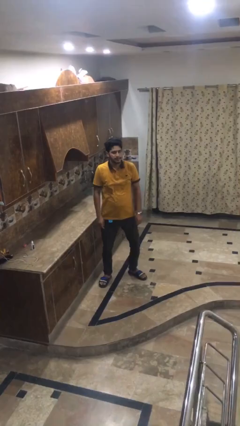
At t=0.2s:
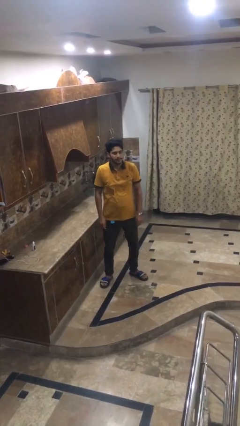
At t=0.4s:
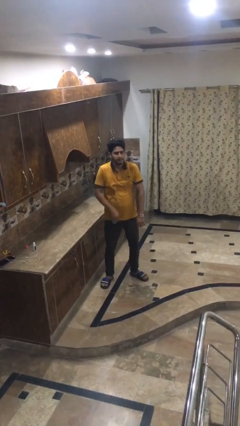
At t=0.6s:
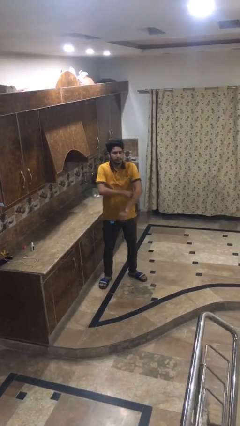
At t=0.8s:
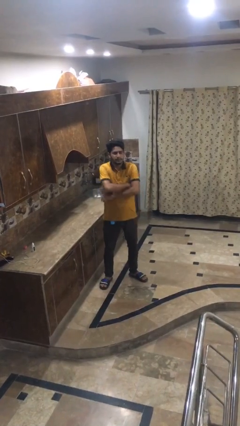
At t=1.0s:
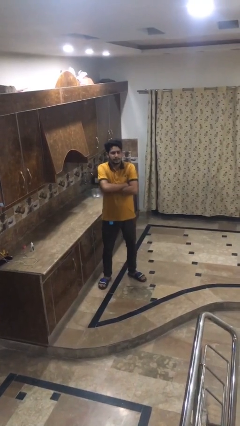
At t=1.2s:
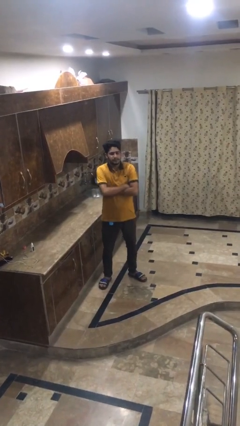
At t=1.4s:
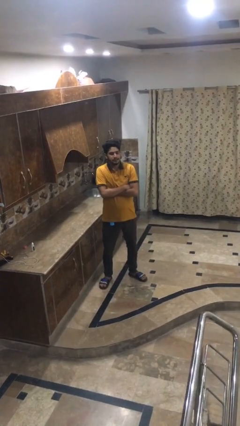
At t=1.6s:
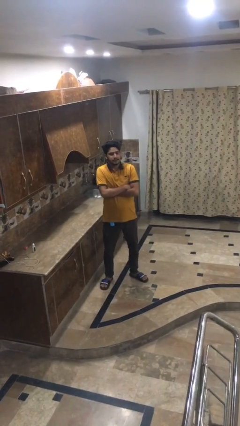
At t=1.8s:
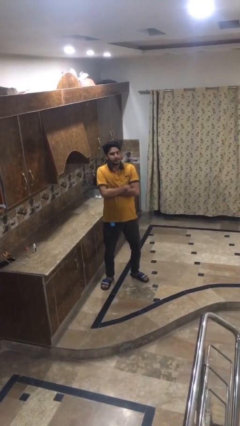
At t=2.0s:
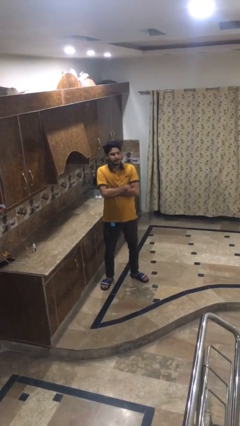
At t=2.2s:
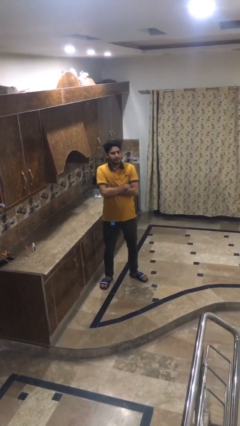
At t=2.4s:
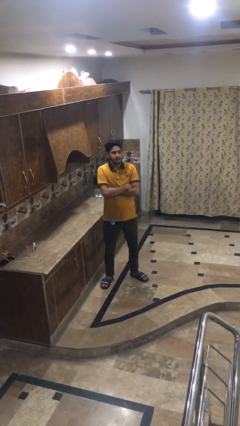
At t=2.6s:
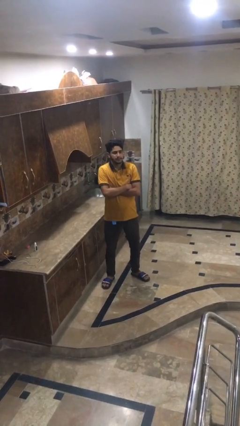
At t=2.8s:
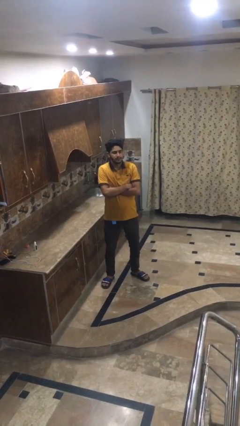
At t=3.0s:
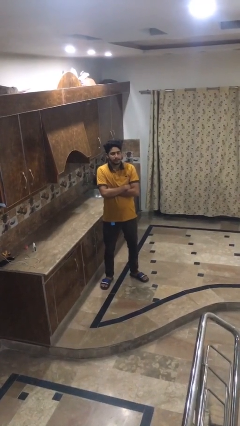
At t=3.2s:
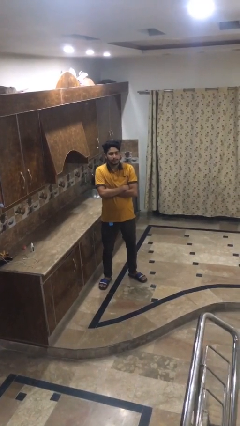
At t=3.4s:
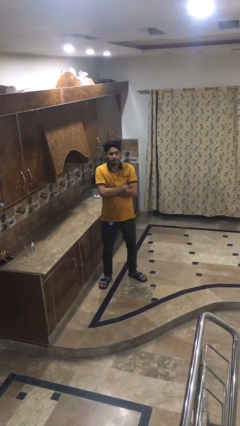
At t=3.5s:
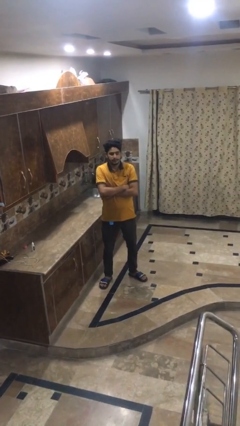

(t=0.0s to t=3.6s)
person crosses arms

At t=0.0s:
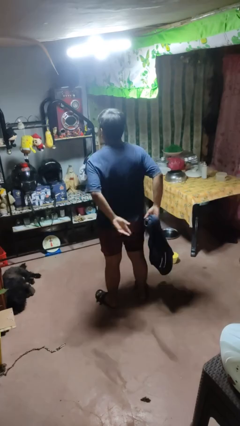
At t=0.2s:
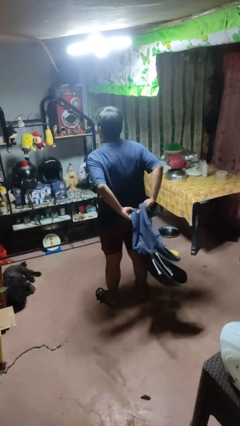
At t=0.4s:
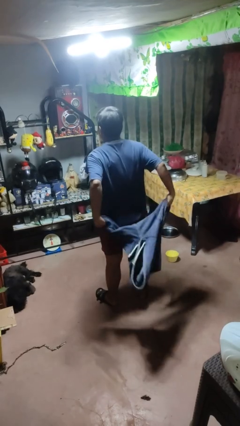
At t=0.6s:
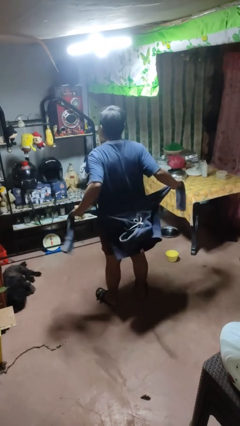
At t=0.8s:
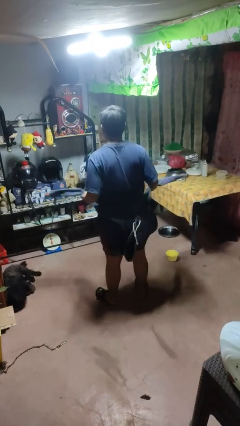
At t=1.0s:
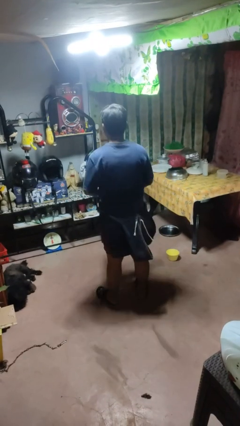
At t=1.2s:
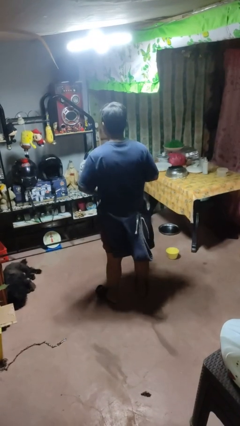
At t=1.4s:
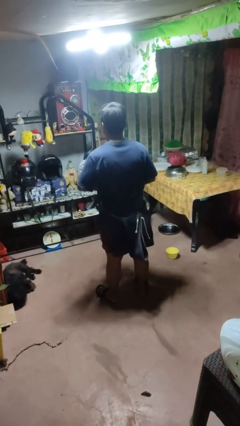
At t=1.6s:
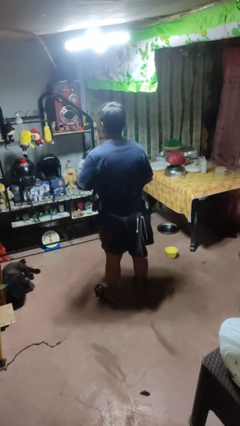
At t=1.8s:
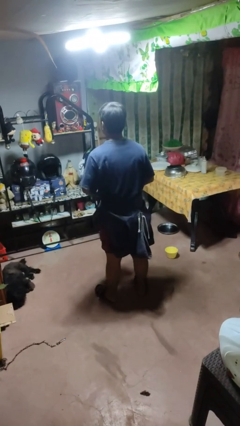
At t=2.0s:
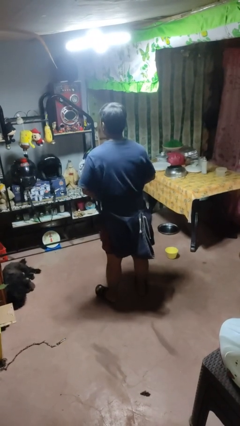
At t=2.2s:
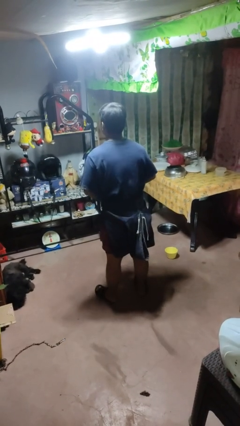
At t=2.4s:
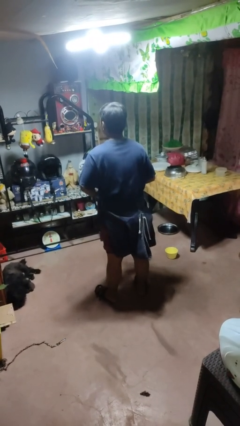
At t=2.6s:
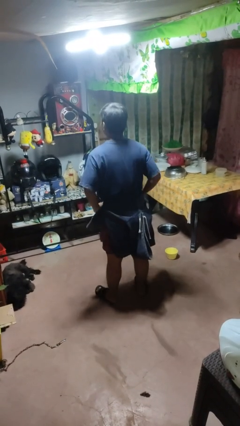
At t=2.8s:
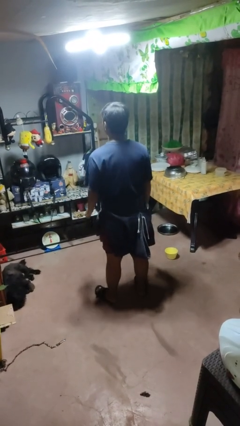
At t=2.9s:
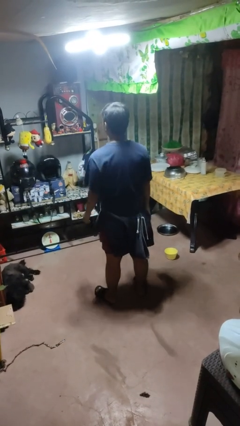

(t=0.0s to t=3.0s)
person ties jacket around waist

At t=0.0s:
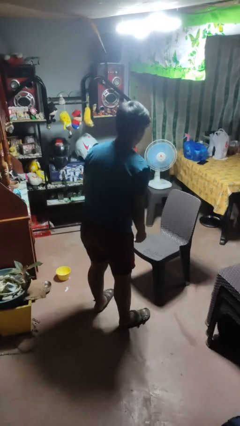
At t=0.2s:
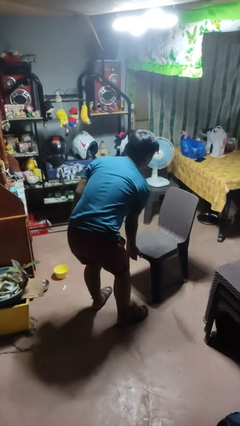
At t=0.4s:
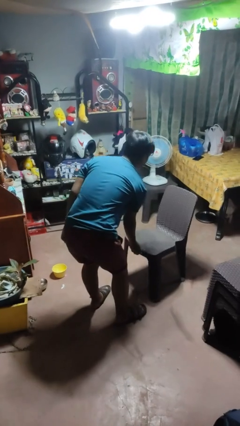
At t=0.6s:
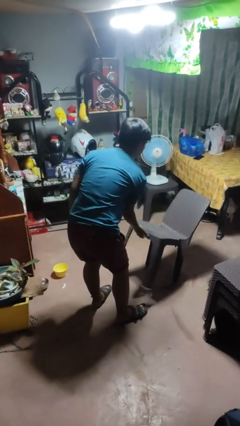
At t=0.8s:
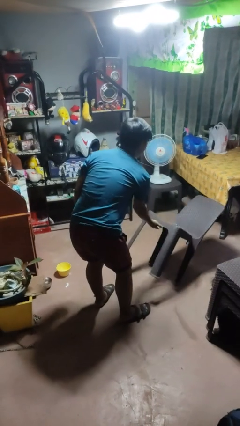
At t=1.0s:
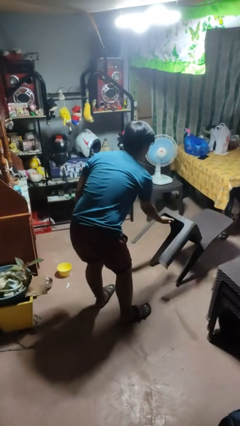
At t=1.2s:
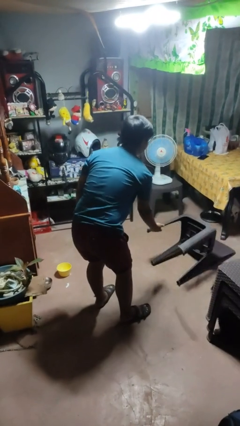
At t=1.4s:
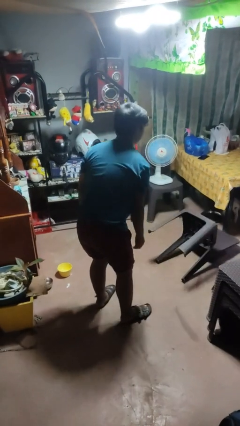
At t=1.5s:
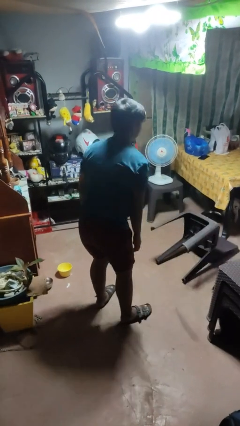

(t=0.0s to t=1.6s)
person knocks over furniture

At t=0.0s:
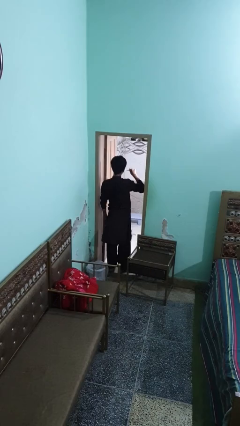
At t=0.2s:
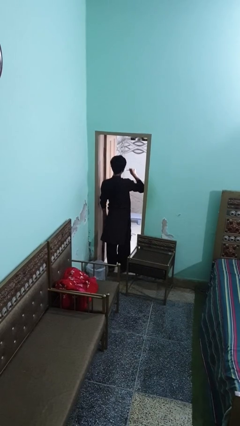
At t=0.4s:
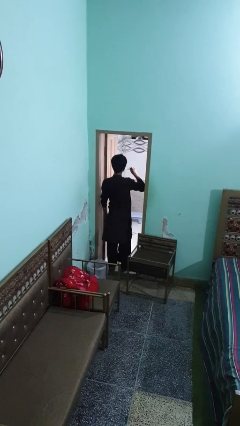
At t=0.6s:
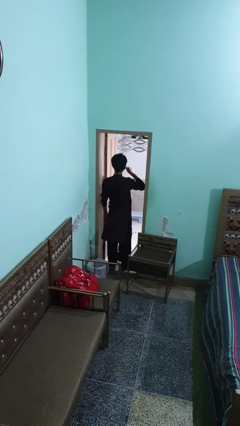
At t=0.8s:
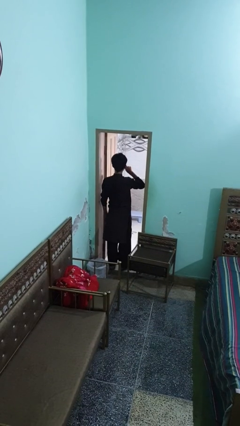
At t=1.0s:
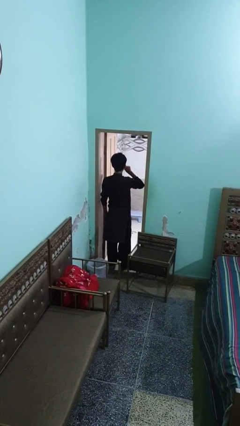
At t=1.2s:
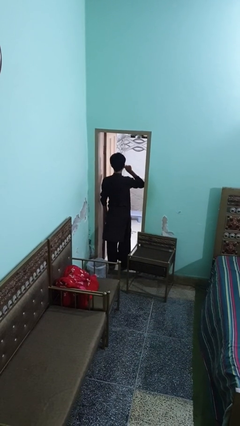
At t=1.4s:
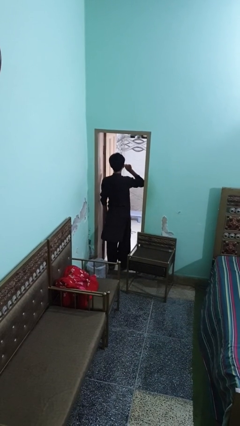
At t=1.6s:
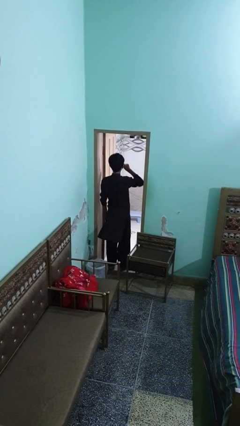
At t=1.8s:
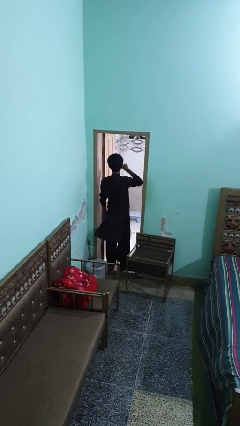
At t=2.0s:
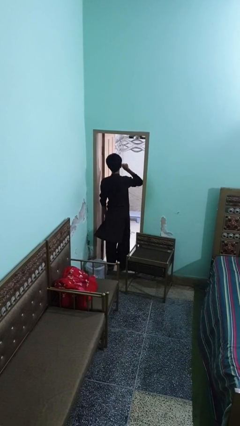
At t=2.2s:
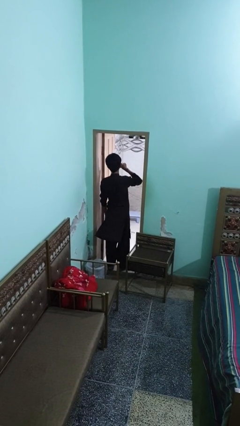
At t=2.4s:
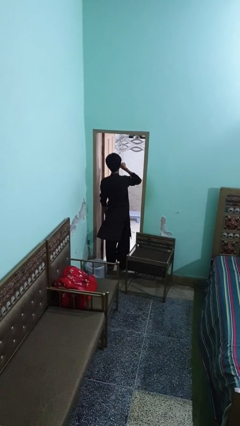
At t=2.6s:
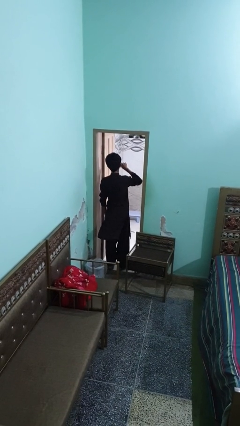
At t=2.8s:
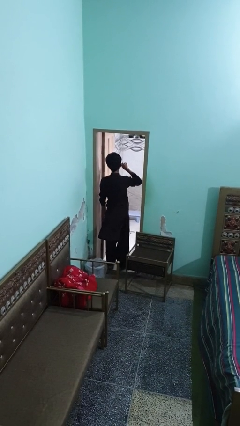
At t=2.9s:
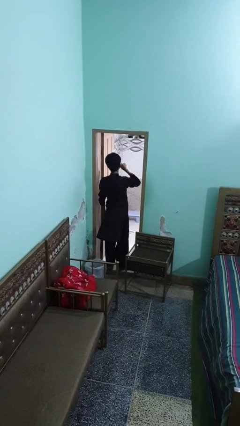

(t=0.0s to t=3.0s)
person brushes teeth

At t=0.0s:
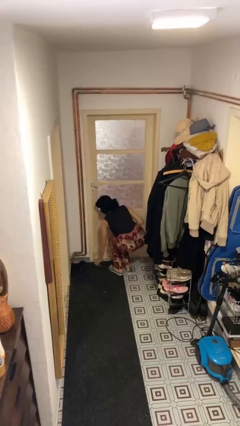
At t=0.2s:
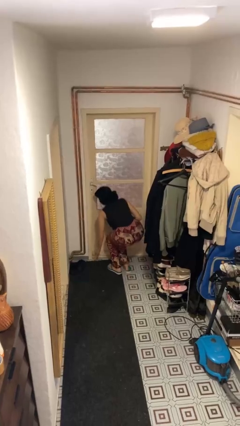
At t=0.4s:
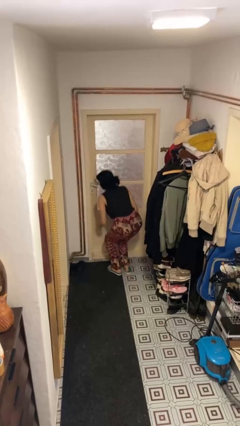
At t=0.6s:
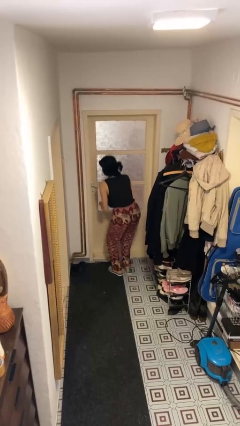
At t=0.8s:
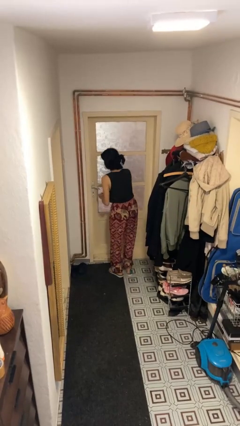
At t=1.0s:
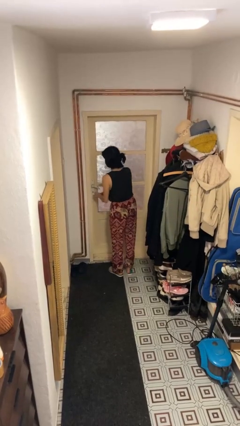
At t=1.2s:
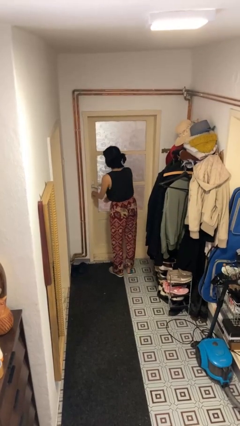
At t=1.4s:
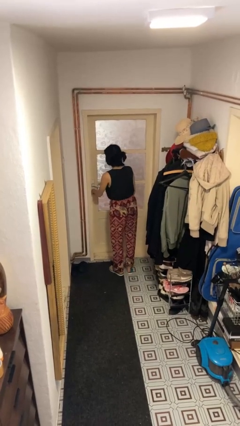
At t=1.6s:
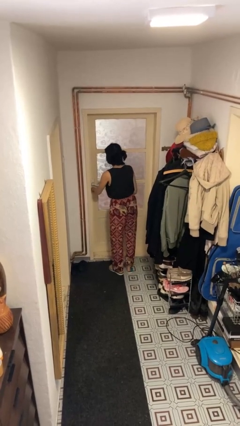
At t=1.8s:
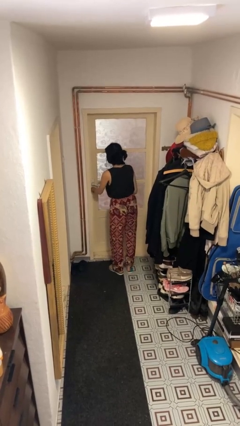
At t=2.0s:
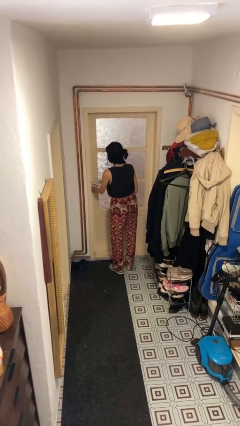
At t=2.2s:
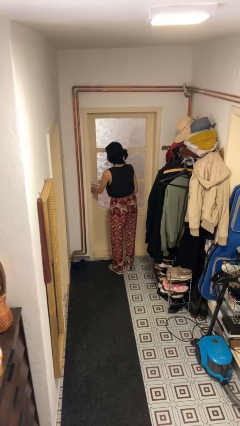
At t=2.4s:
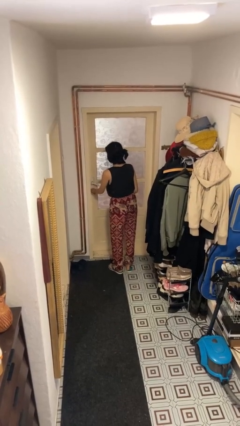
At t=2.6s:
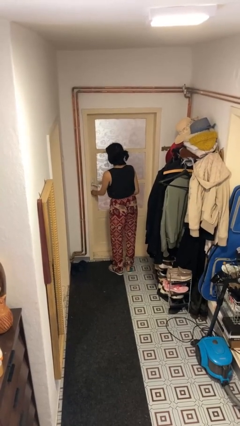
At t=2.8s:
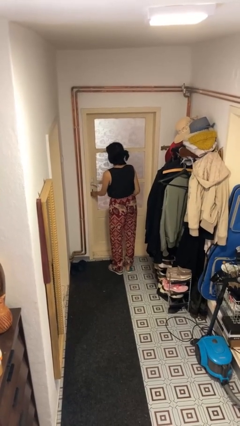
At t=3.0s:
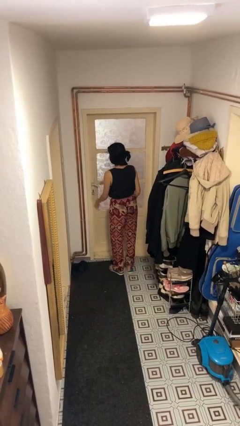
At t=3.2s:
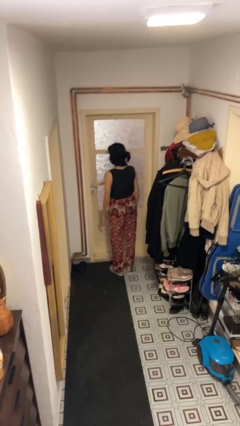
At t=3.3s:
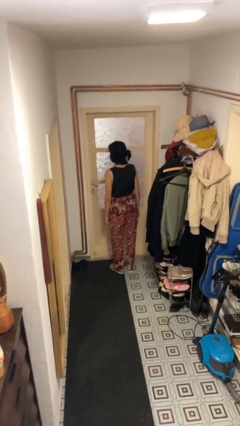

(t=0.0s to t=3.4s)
person locks door with keys

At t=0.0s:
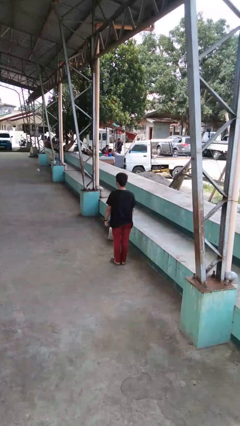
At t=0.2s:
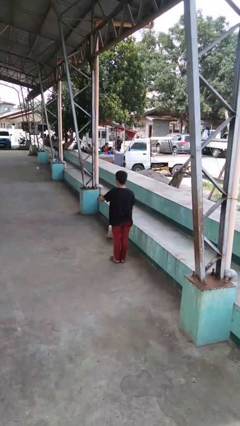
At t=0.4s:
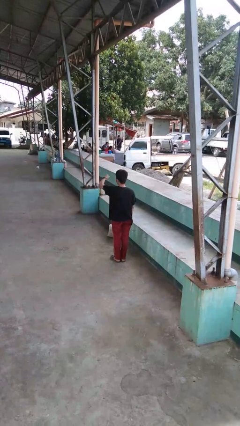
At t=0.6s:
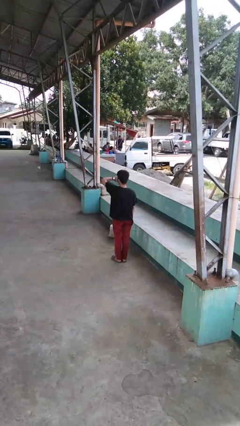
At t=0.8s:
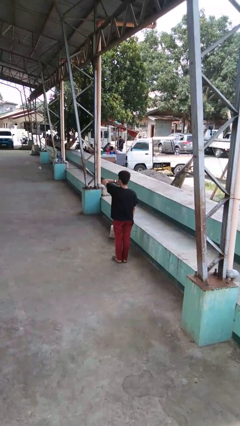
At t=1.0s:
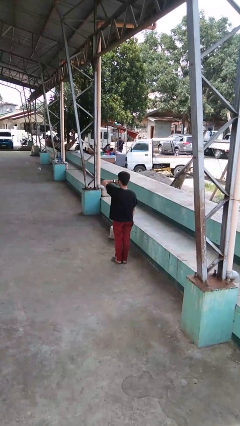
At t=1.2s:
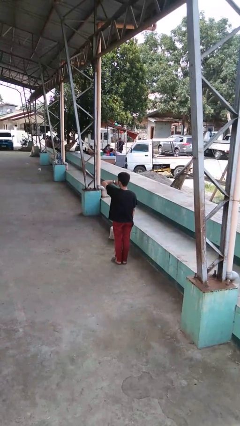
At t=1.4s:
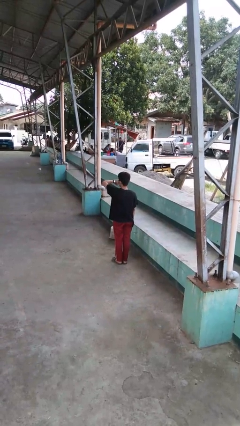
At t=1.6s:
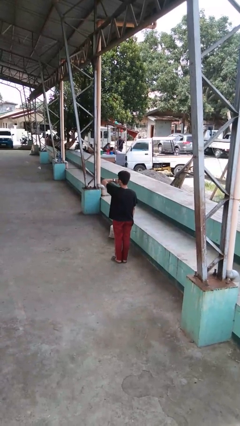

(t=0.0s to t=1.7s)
person looks at wristwatch

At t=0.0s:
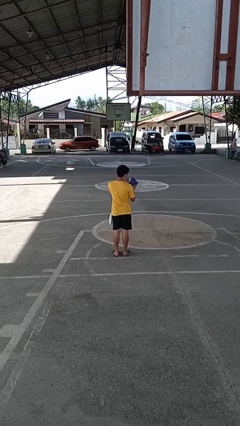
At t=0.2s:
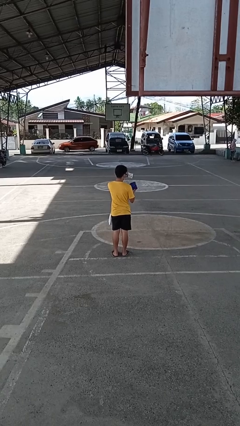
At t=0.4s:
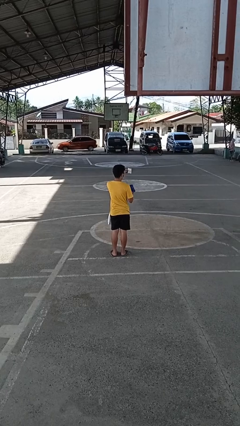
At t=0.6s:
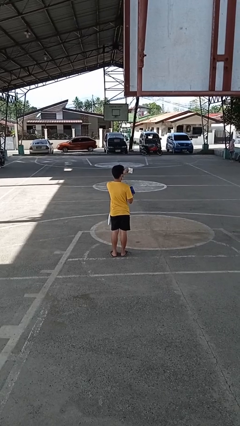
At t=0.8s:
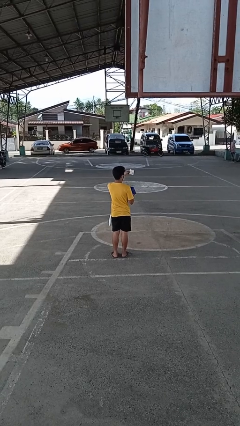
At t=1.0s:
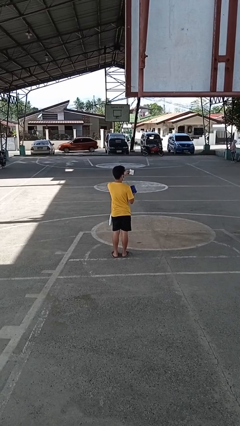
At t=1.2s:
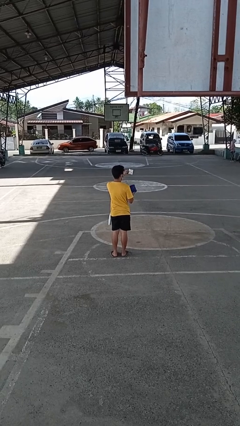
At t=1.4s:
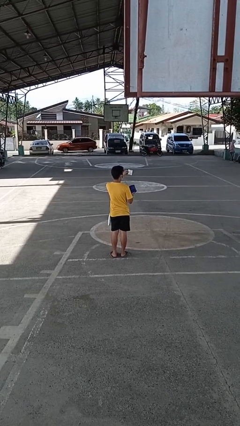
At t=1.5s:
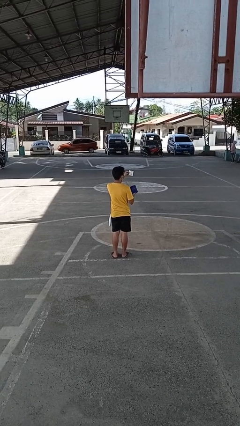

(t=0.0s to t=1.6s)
person takes object from purse
